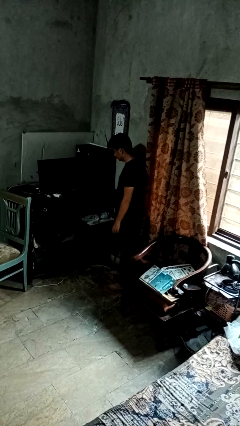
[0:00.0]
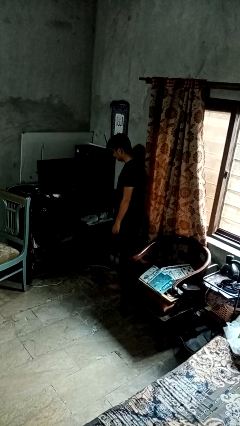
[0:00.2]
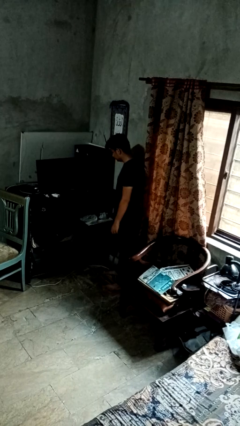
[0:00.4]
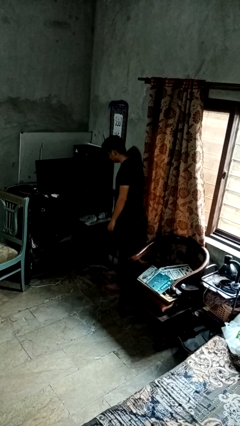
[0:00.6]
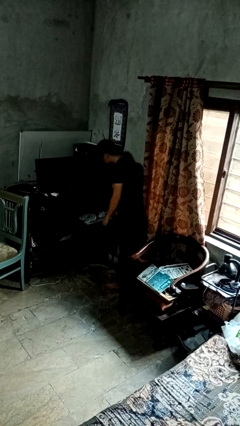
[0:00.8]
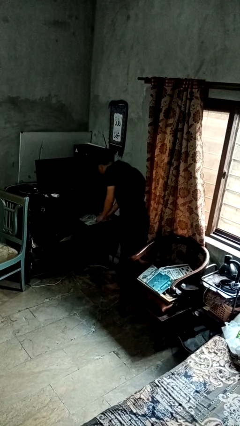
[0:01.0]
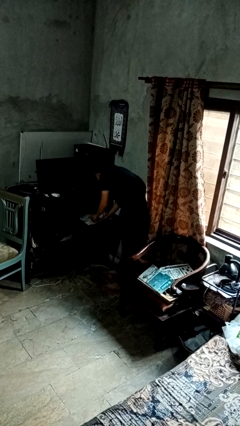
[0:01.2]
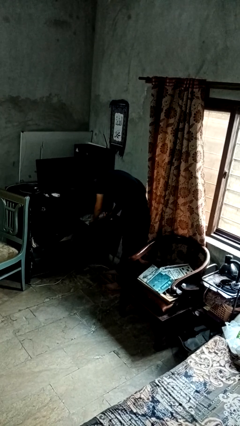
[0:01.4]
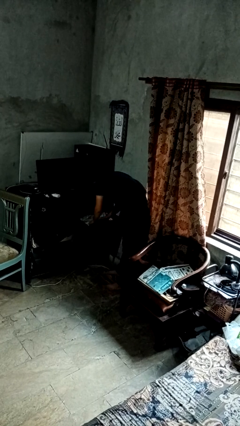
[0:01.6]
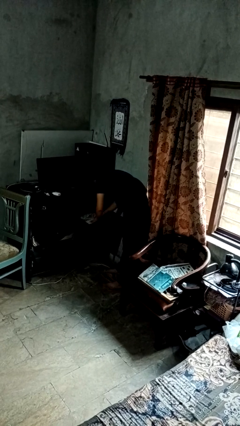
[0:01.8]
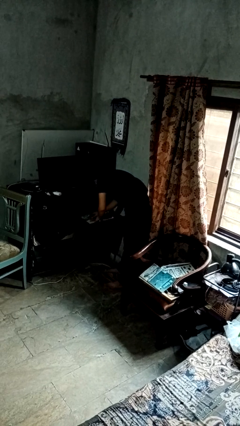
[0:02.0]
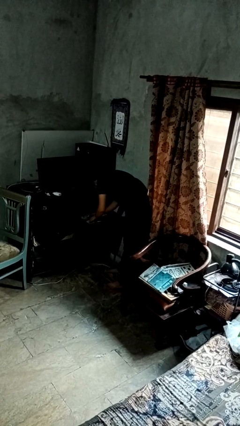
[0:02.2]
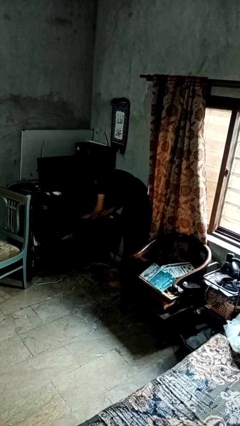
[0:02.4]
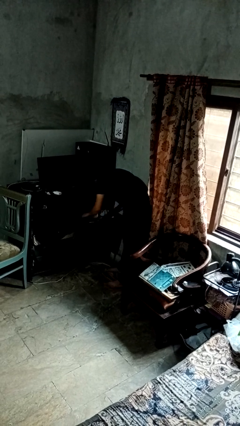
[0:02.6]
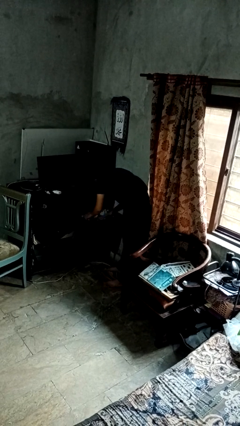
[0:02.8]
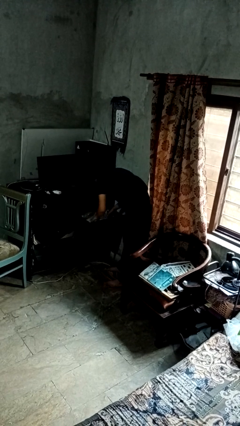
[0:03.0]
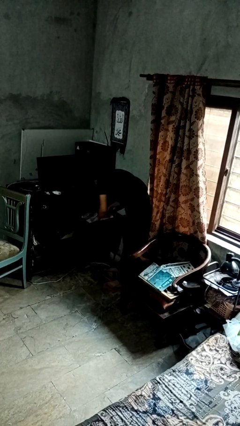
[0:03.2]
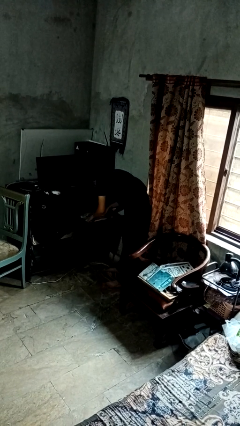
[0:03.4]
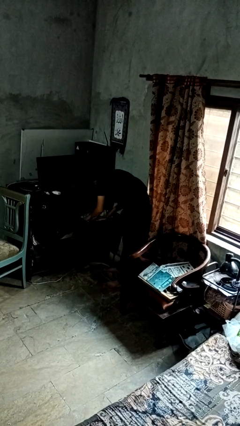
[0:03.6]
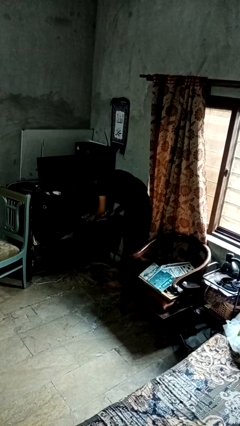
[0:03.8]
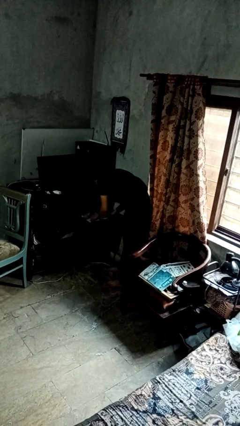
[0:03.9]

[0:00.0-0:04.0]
person searches in cabinet

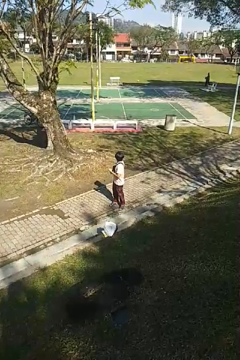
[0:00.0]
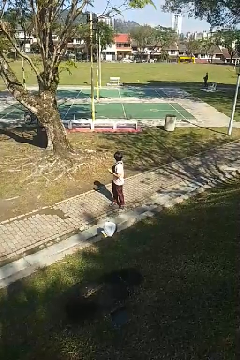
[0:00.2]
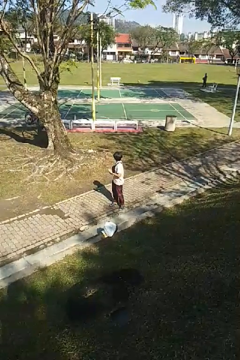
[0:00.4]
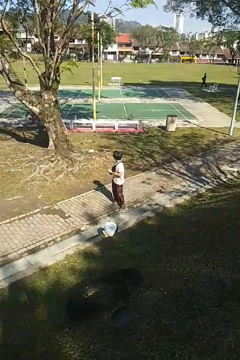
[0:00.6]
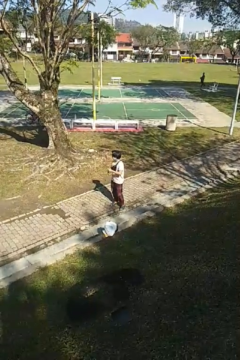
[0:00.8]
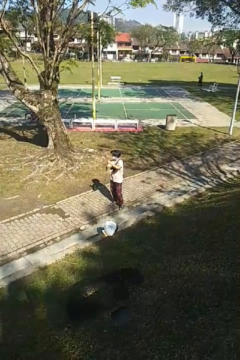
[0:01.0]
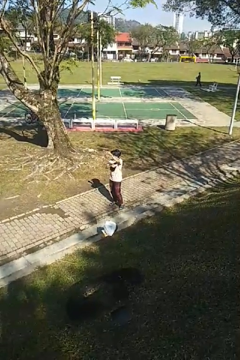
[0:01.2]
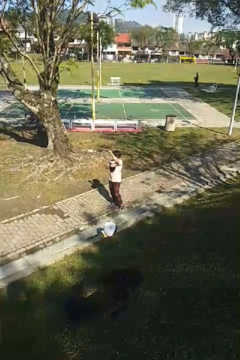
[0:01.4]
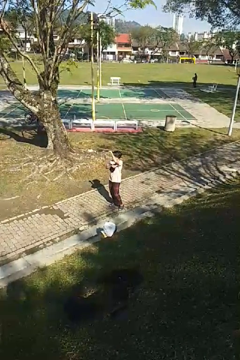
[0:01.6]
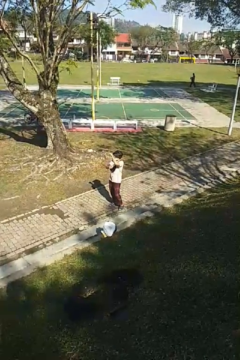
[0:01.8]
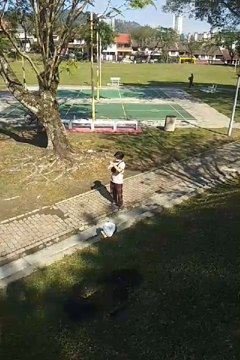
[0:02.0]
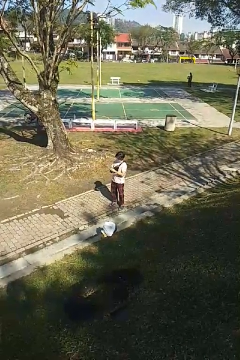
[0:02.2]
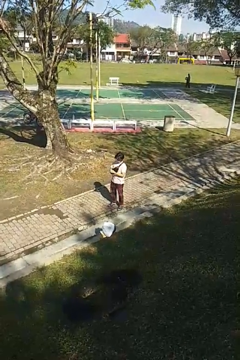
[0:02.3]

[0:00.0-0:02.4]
person applies deodorant

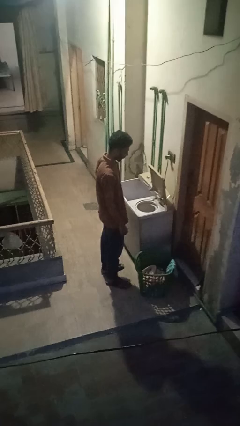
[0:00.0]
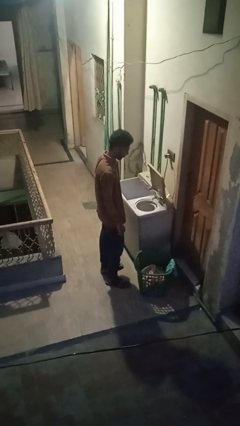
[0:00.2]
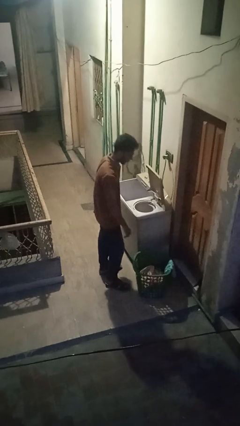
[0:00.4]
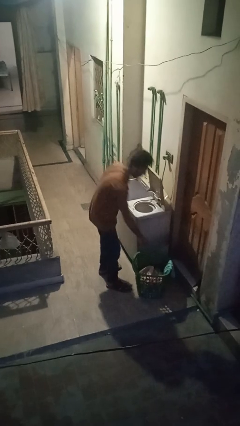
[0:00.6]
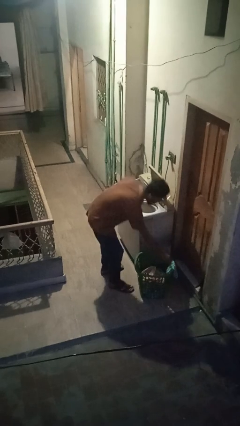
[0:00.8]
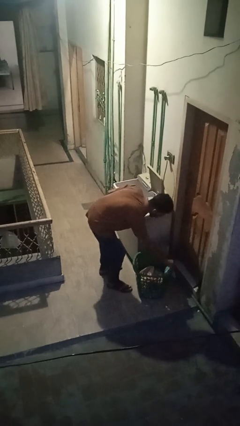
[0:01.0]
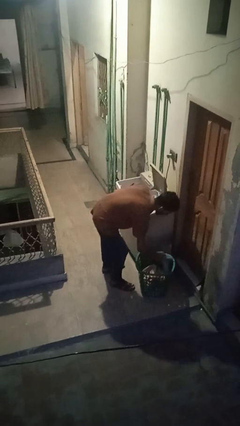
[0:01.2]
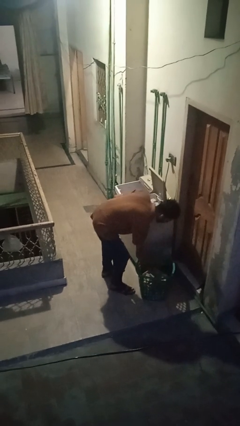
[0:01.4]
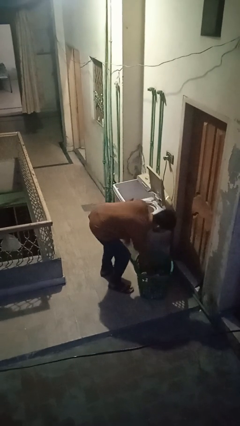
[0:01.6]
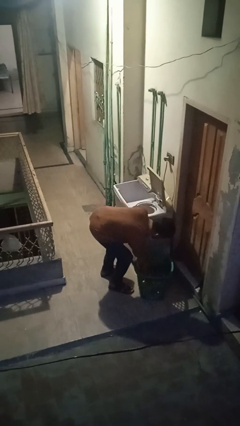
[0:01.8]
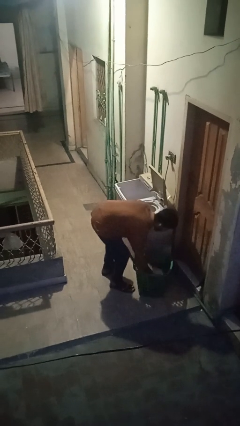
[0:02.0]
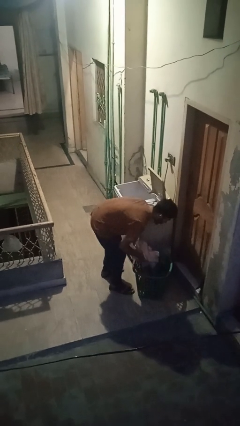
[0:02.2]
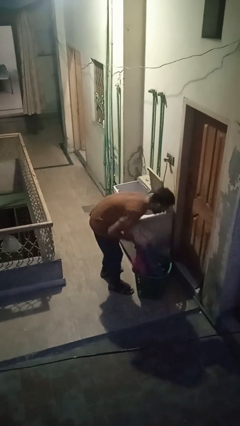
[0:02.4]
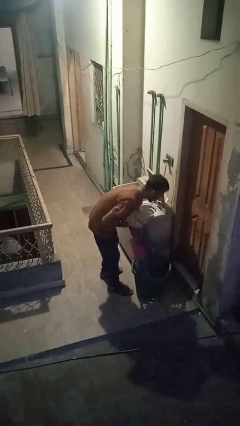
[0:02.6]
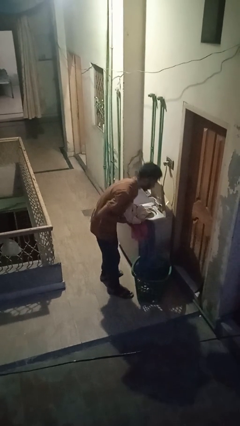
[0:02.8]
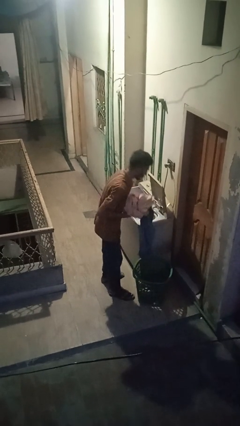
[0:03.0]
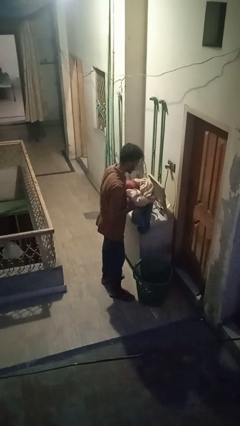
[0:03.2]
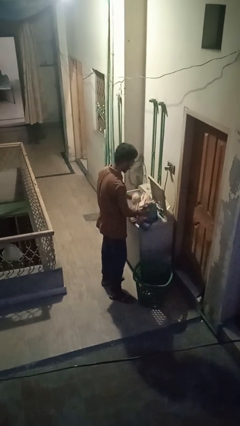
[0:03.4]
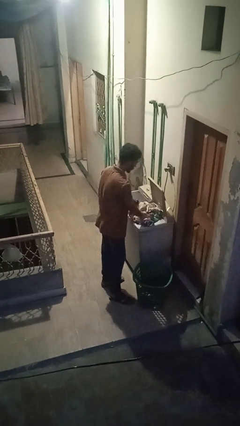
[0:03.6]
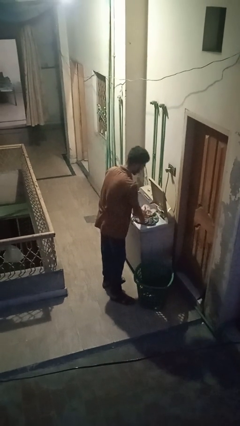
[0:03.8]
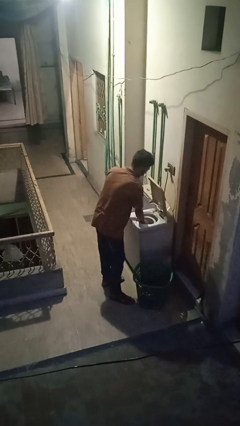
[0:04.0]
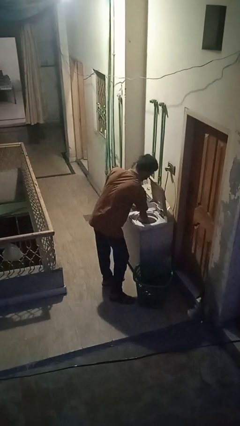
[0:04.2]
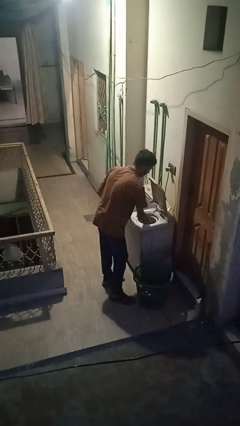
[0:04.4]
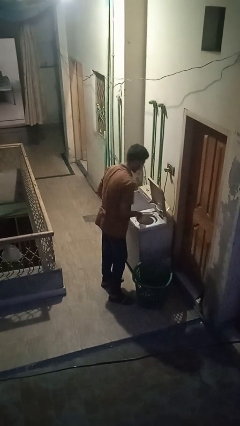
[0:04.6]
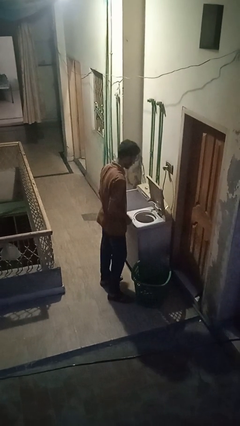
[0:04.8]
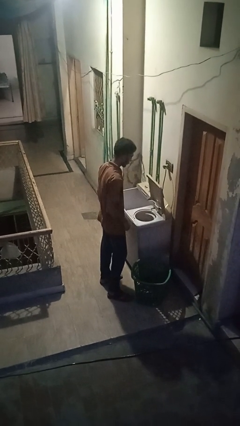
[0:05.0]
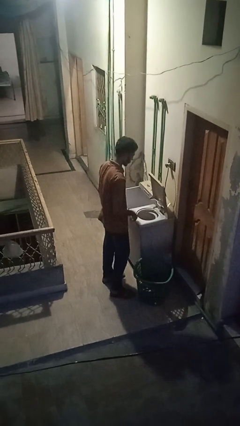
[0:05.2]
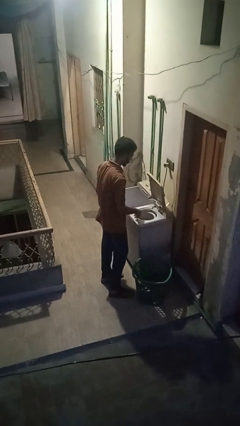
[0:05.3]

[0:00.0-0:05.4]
person loads dryer

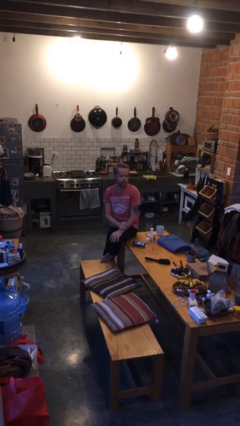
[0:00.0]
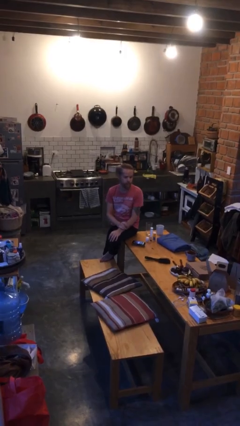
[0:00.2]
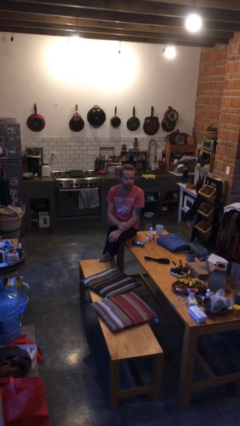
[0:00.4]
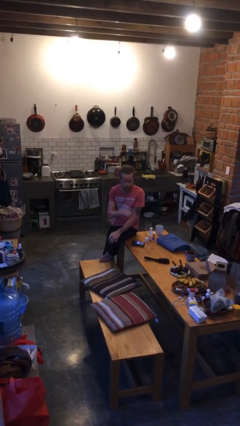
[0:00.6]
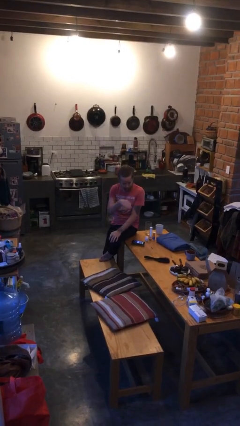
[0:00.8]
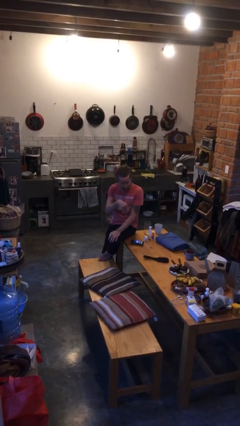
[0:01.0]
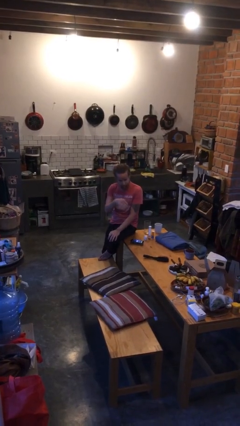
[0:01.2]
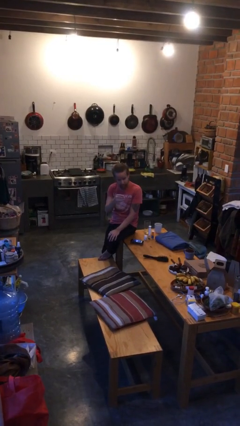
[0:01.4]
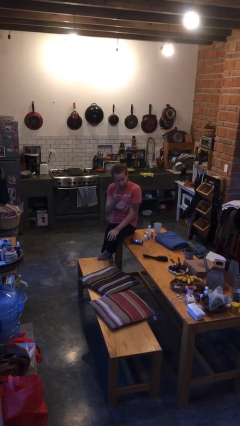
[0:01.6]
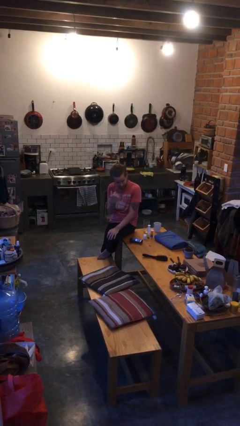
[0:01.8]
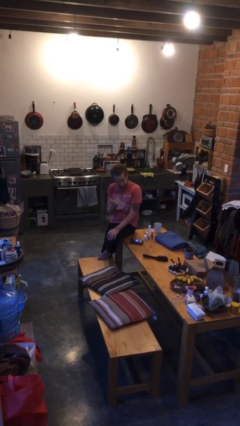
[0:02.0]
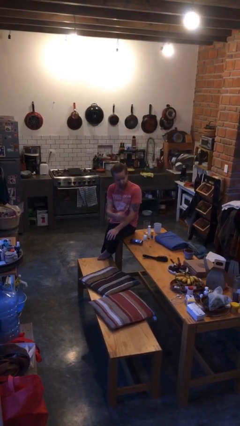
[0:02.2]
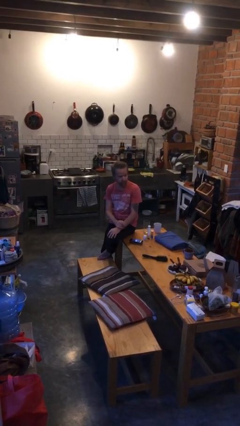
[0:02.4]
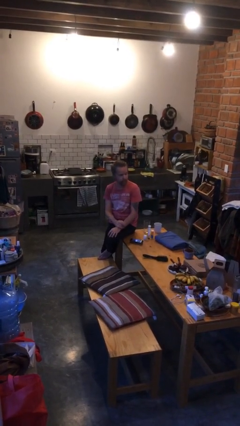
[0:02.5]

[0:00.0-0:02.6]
person gestures come here

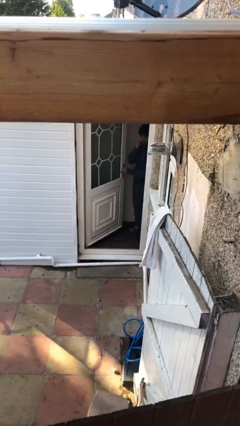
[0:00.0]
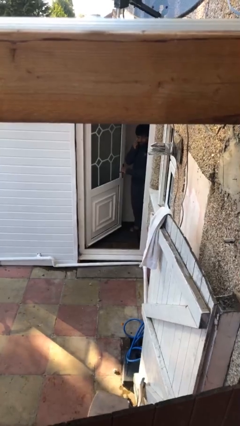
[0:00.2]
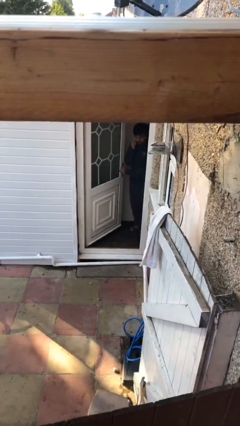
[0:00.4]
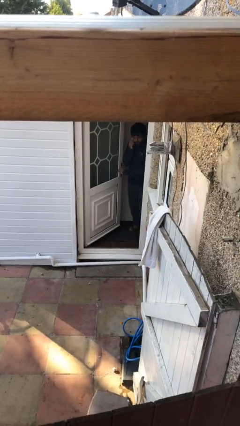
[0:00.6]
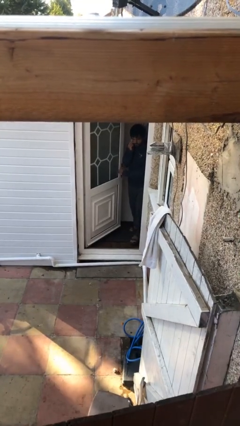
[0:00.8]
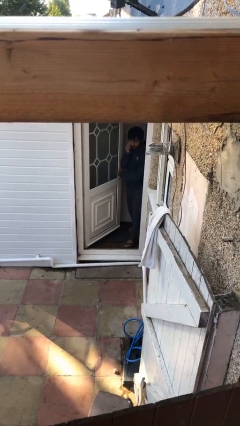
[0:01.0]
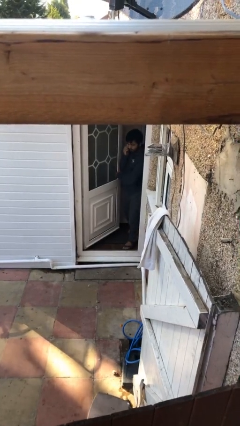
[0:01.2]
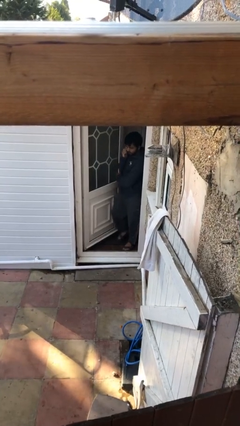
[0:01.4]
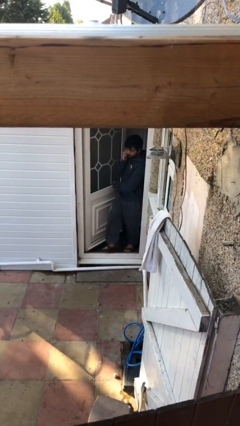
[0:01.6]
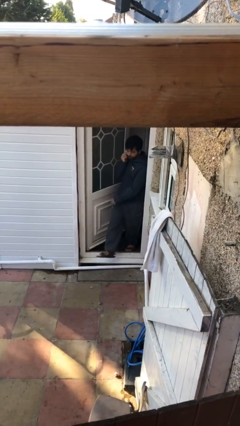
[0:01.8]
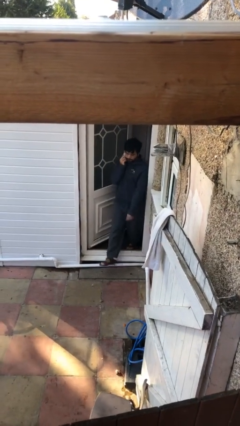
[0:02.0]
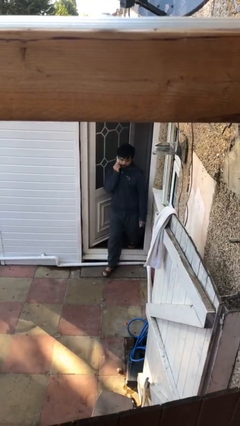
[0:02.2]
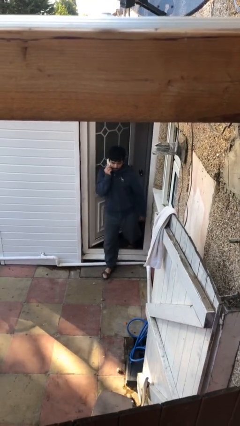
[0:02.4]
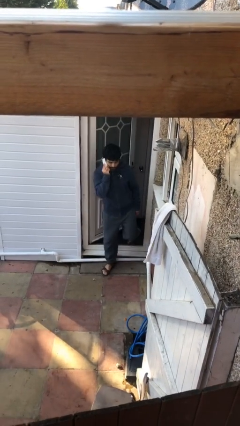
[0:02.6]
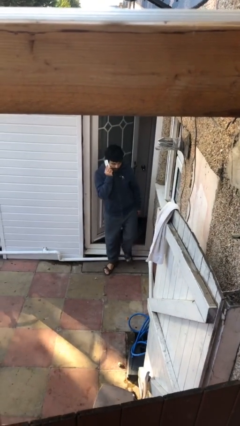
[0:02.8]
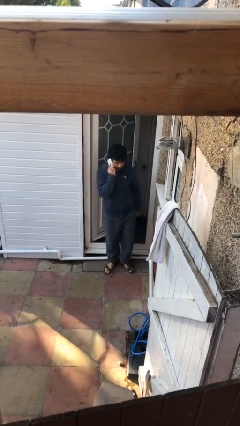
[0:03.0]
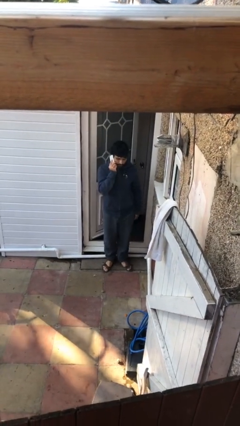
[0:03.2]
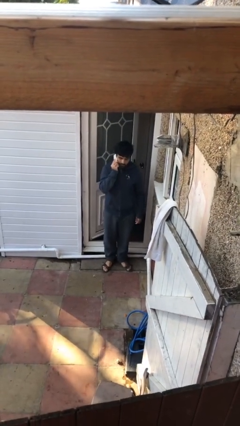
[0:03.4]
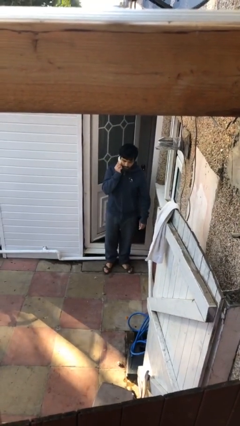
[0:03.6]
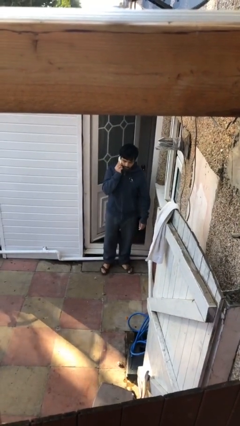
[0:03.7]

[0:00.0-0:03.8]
person enters scene through structure
